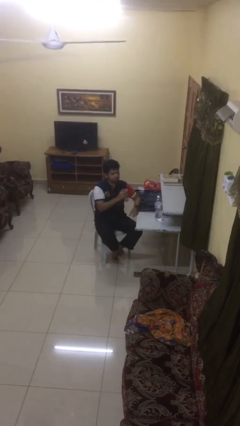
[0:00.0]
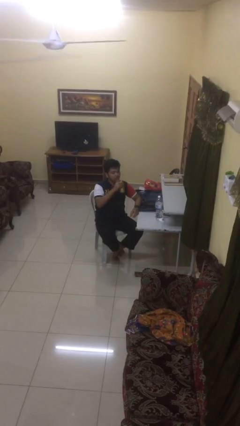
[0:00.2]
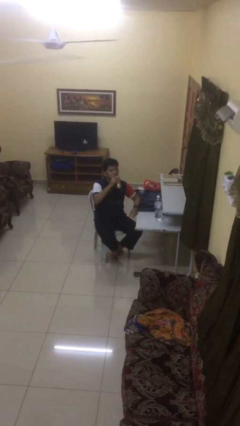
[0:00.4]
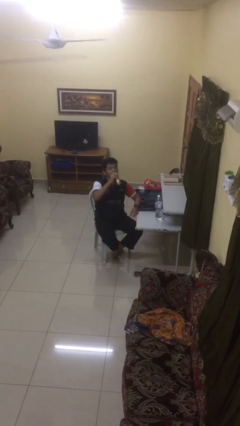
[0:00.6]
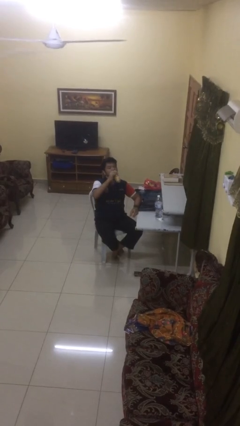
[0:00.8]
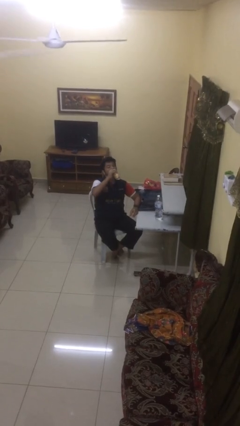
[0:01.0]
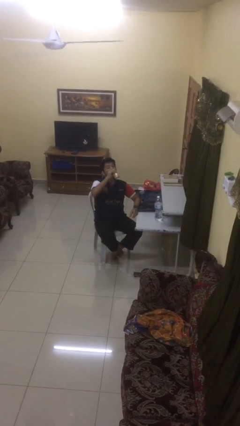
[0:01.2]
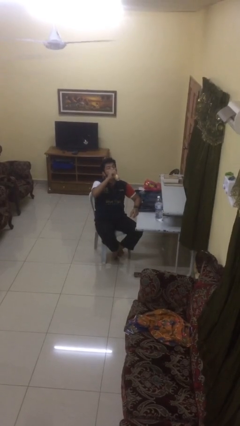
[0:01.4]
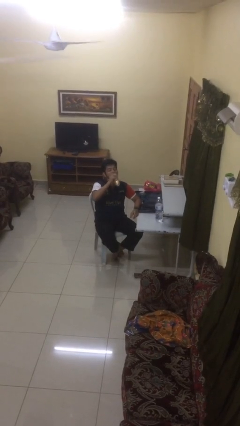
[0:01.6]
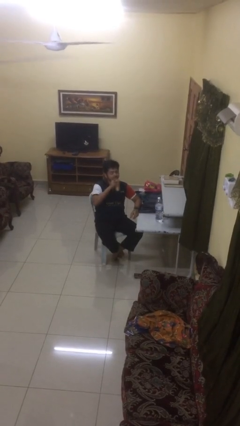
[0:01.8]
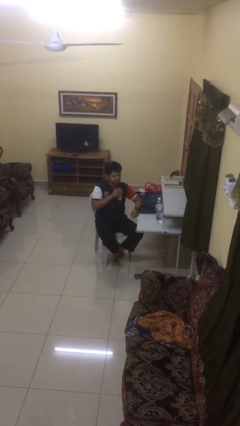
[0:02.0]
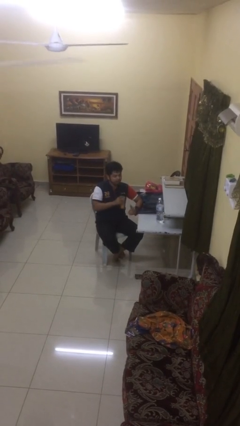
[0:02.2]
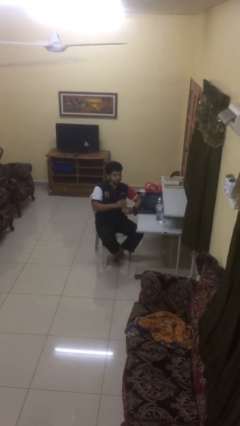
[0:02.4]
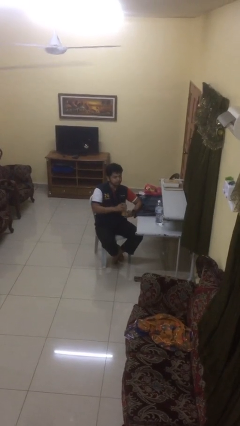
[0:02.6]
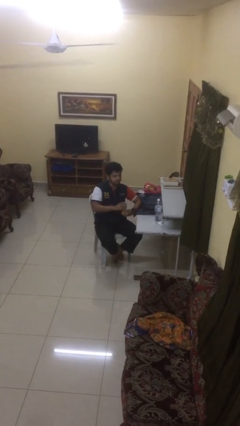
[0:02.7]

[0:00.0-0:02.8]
person drinks from beverage can

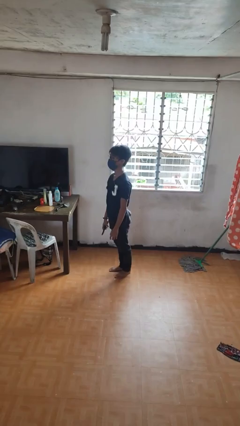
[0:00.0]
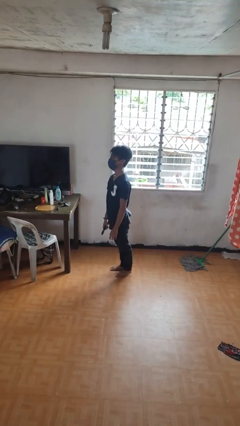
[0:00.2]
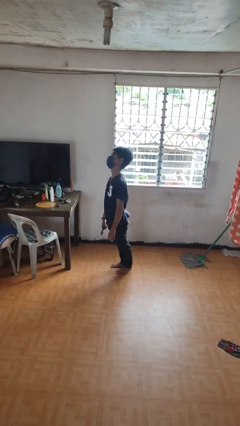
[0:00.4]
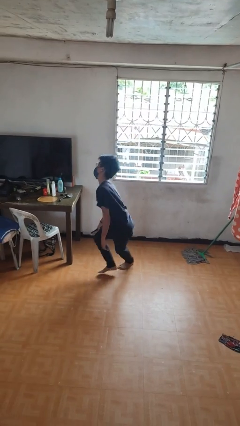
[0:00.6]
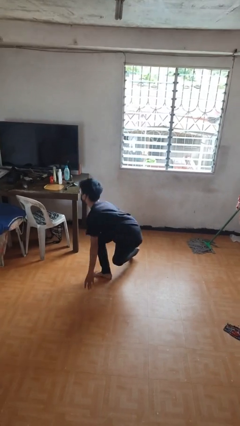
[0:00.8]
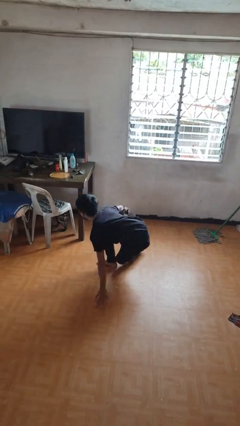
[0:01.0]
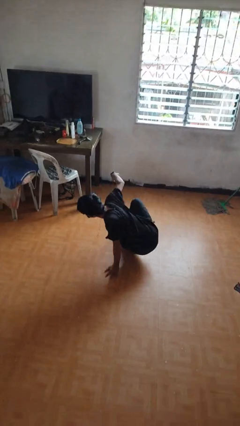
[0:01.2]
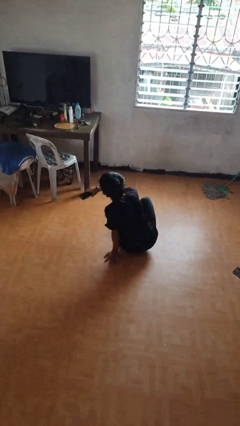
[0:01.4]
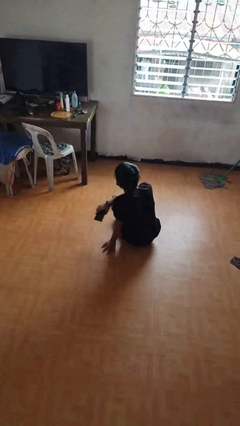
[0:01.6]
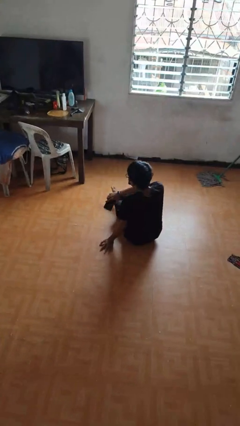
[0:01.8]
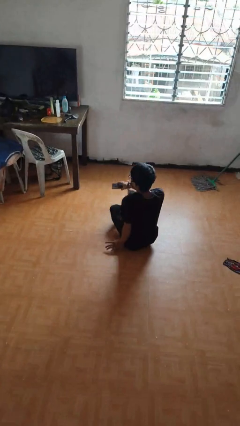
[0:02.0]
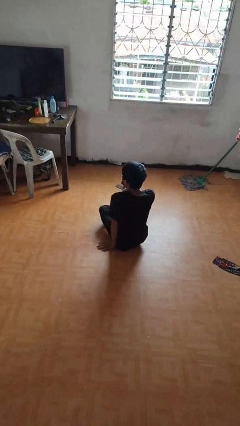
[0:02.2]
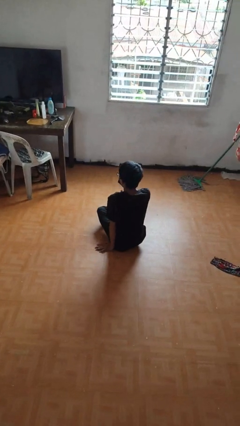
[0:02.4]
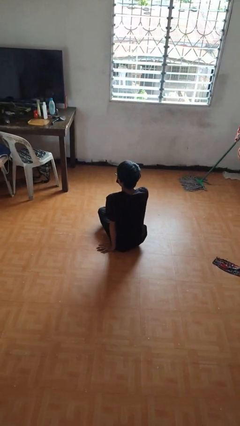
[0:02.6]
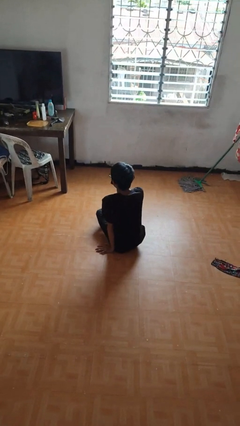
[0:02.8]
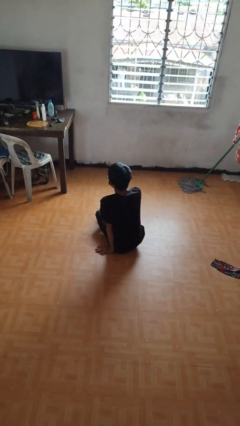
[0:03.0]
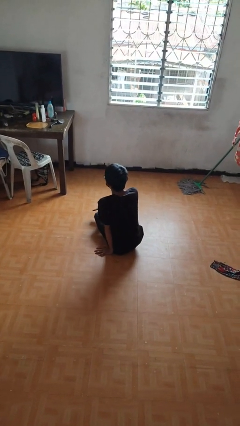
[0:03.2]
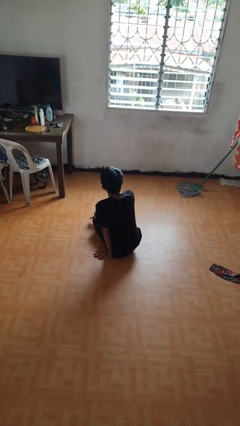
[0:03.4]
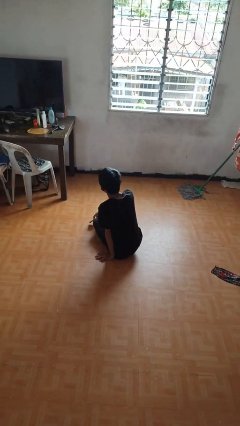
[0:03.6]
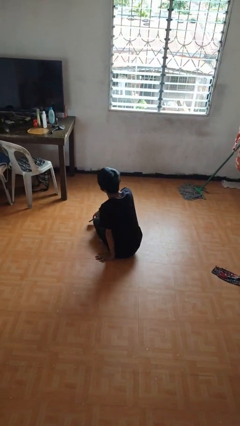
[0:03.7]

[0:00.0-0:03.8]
person falls while standing

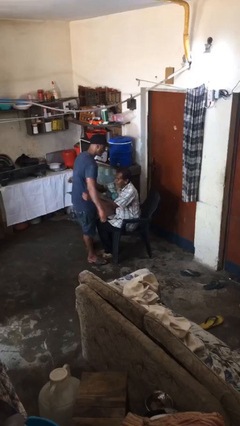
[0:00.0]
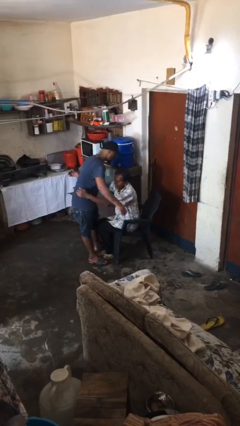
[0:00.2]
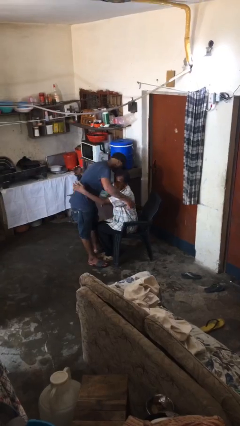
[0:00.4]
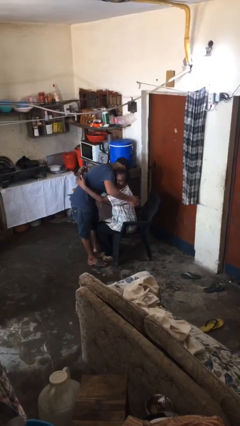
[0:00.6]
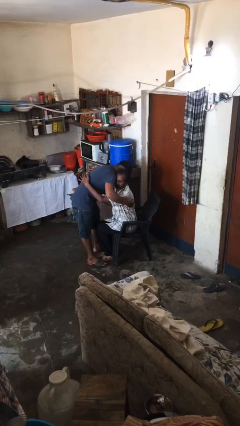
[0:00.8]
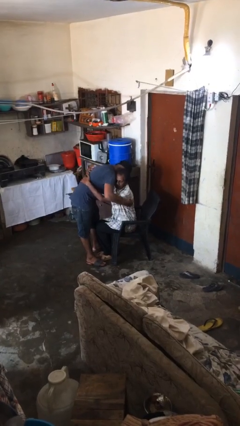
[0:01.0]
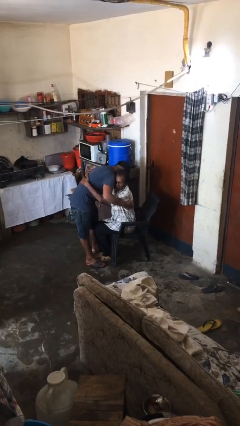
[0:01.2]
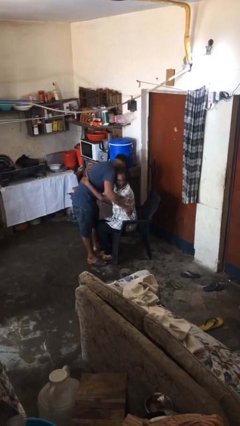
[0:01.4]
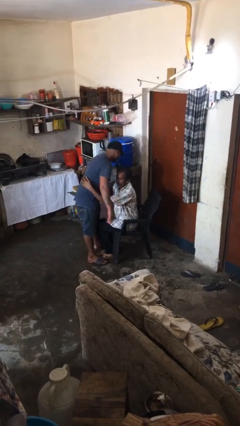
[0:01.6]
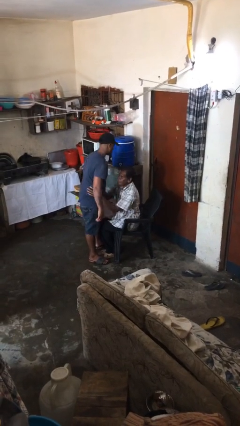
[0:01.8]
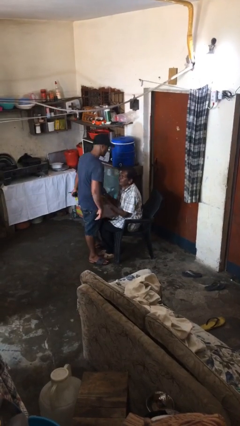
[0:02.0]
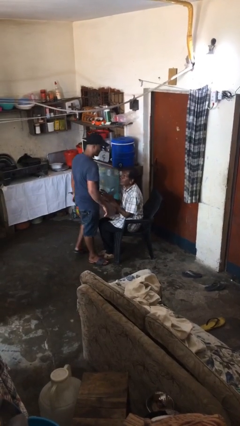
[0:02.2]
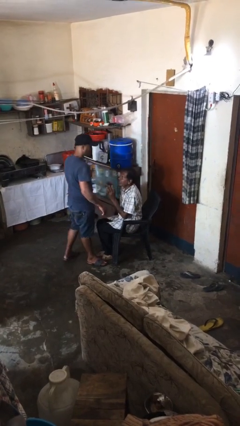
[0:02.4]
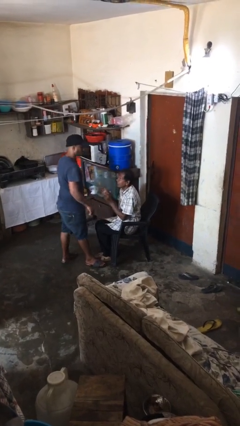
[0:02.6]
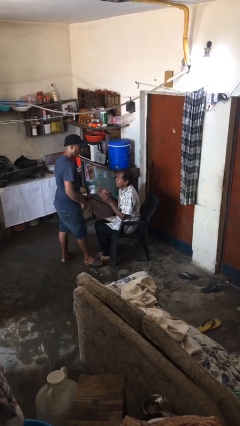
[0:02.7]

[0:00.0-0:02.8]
person embraces person

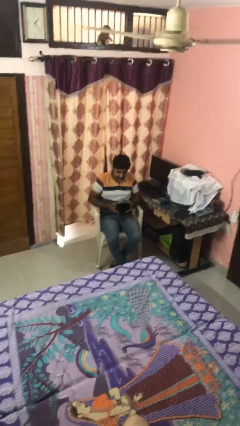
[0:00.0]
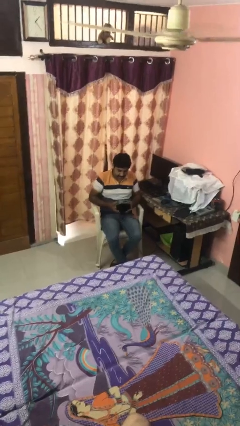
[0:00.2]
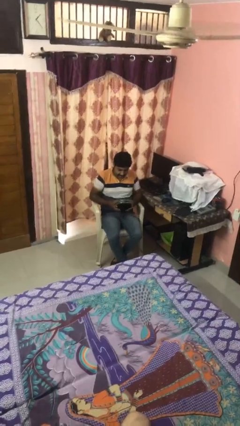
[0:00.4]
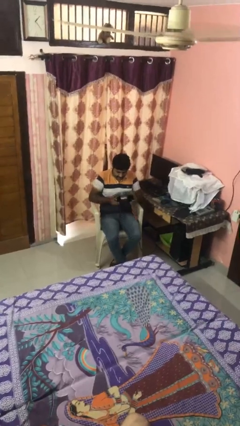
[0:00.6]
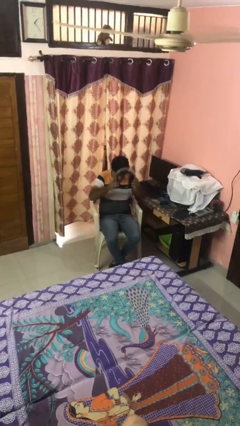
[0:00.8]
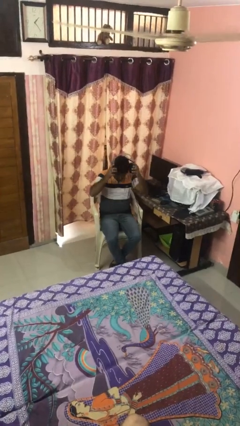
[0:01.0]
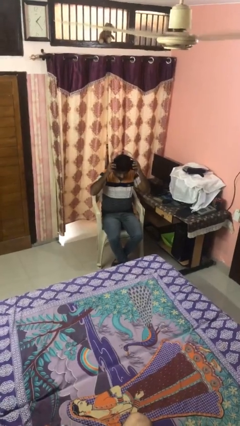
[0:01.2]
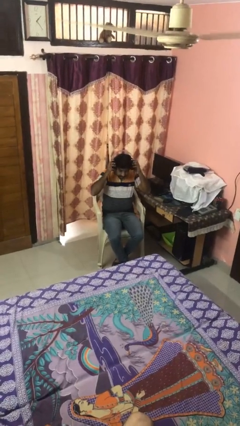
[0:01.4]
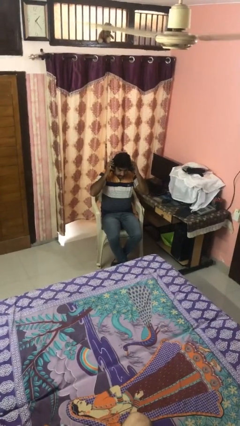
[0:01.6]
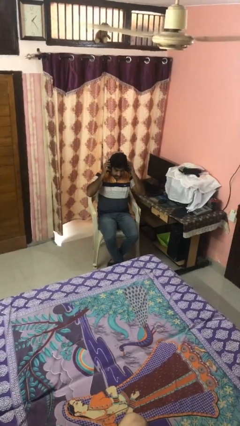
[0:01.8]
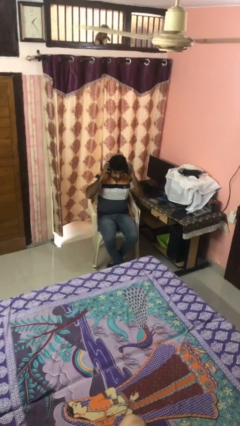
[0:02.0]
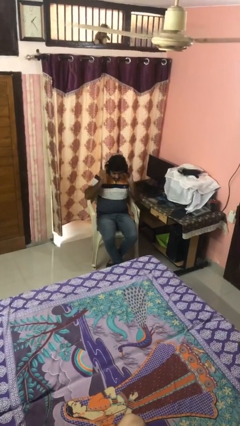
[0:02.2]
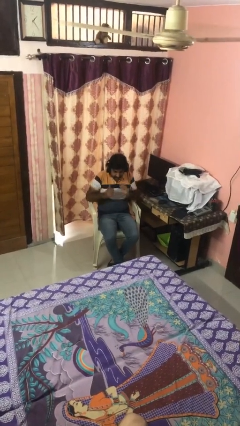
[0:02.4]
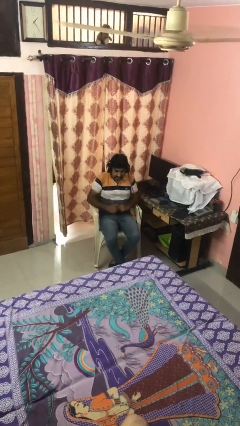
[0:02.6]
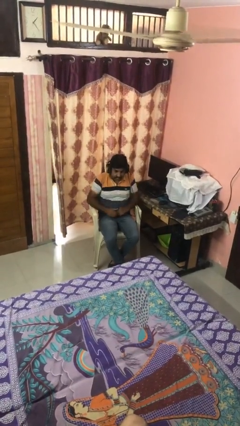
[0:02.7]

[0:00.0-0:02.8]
person puts on headphones

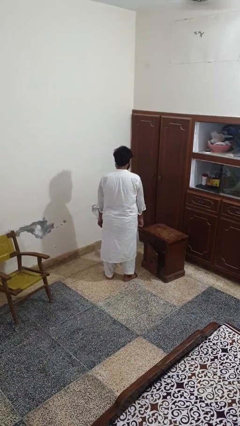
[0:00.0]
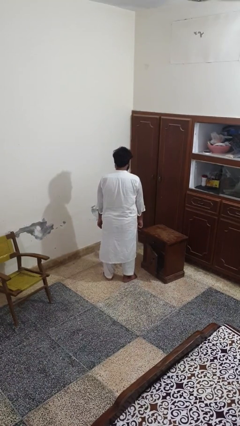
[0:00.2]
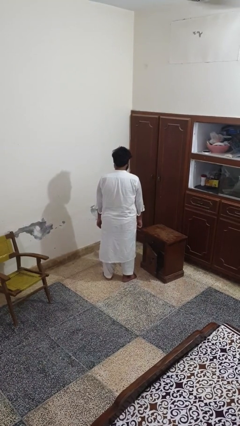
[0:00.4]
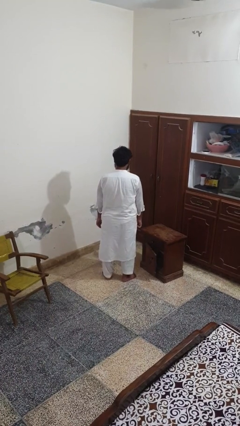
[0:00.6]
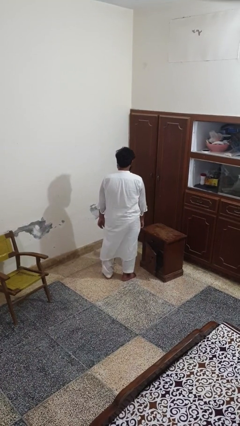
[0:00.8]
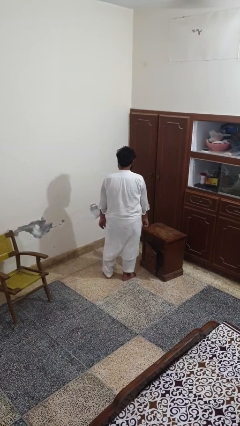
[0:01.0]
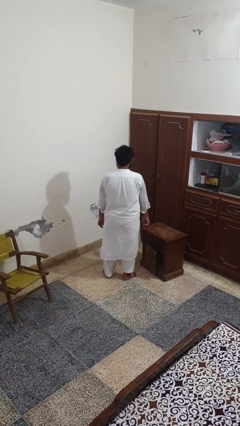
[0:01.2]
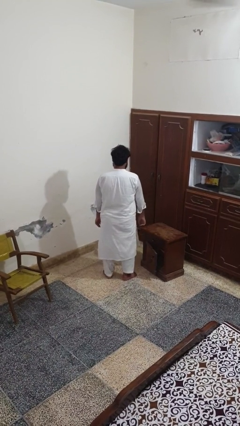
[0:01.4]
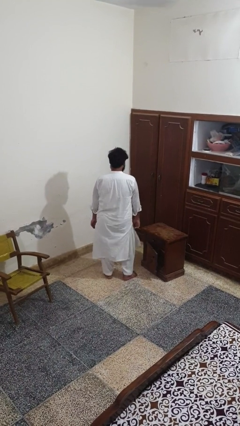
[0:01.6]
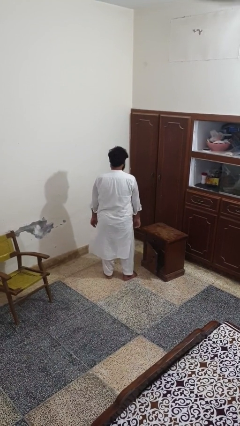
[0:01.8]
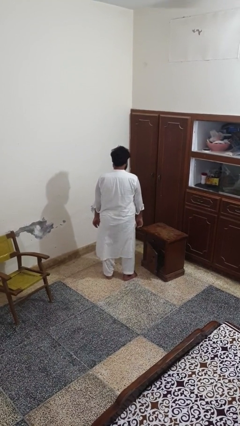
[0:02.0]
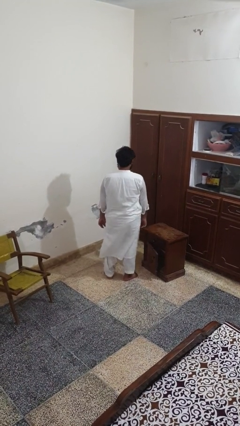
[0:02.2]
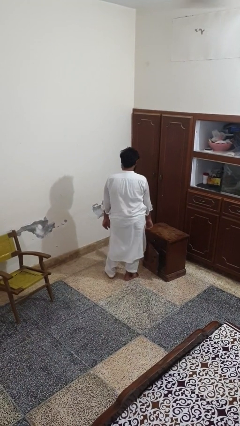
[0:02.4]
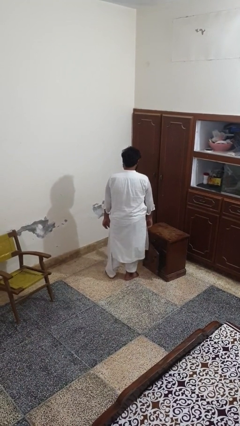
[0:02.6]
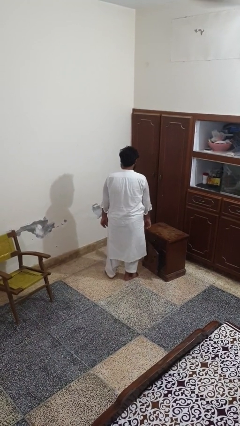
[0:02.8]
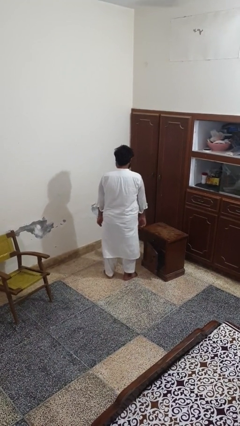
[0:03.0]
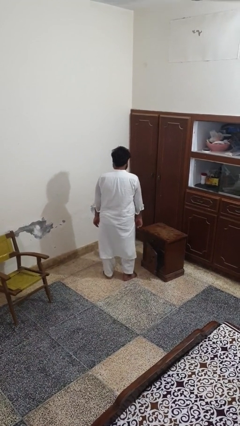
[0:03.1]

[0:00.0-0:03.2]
person wiggles hips

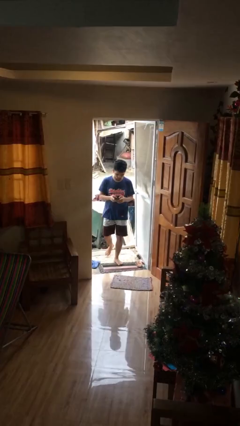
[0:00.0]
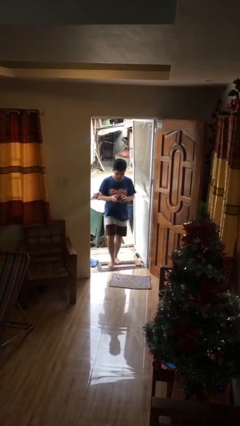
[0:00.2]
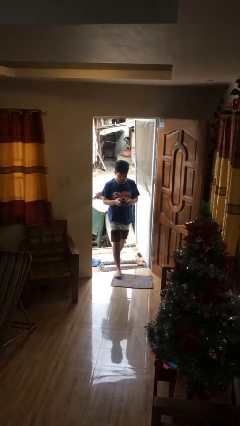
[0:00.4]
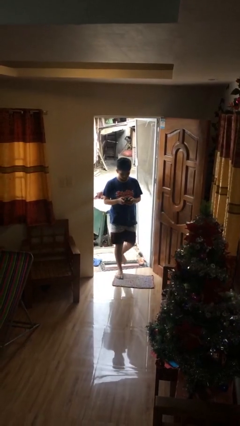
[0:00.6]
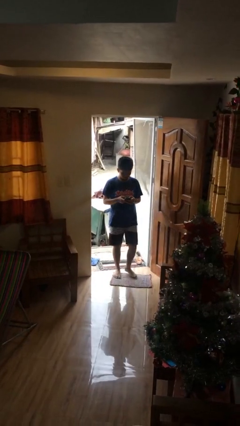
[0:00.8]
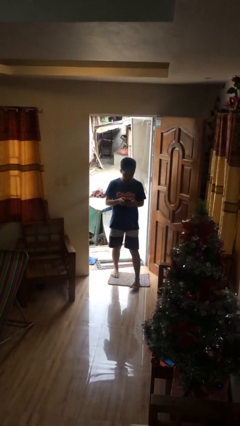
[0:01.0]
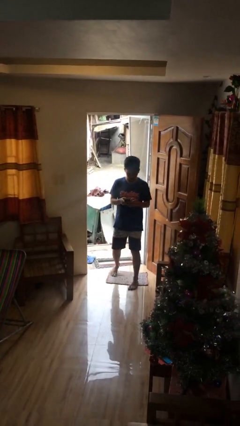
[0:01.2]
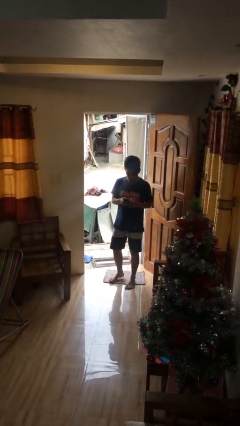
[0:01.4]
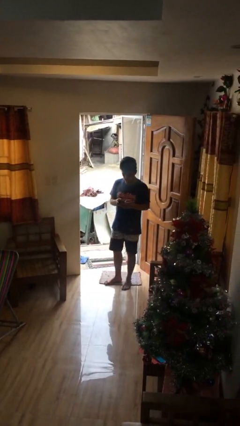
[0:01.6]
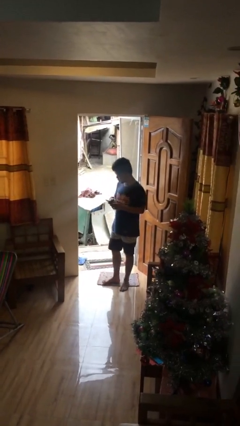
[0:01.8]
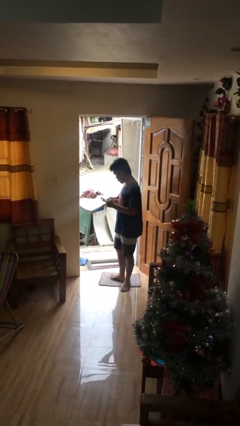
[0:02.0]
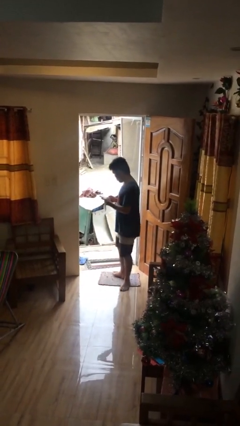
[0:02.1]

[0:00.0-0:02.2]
person enters scene through structure

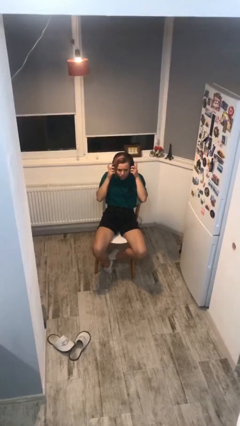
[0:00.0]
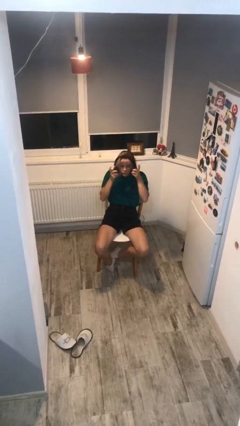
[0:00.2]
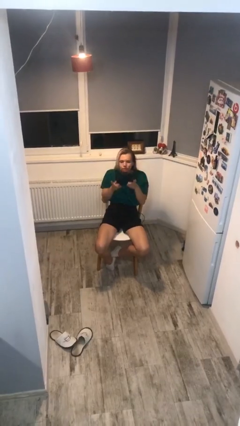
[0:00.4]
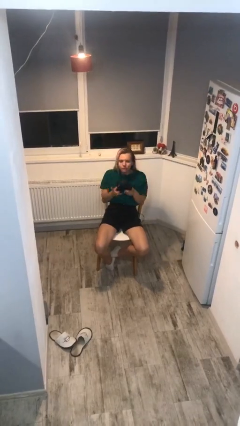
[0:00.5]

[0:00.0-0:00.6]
person takes off headphones
